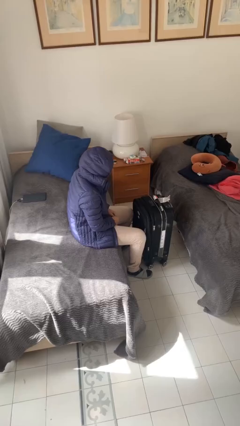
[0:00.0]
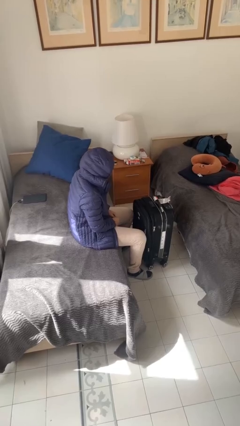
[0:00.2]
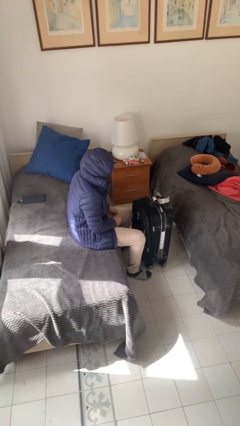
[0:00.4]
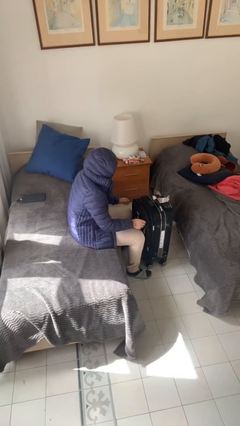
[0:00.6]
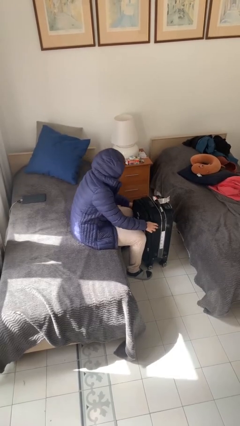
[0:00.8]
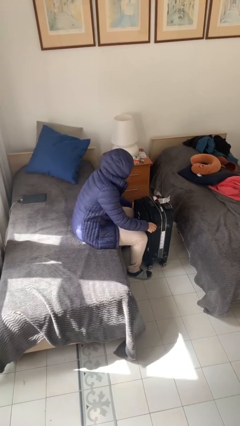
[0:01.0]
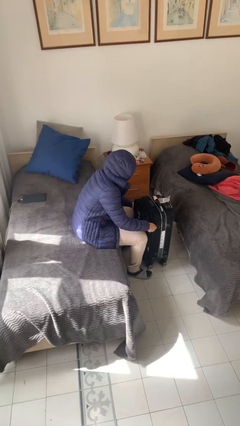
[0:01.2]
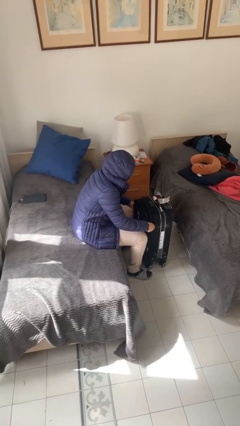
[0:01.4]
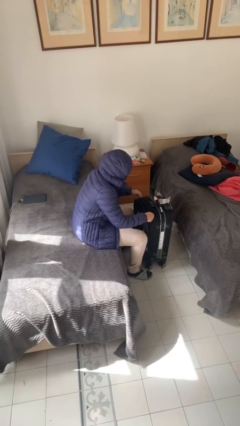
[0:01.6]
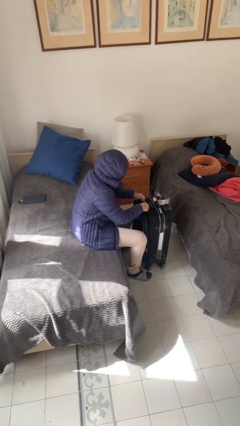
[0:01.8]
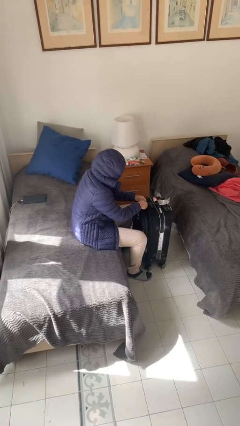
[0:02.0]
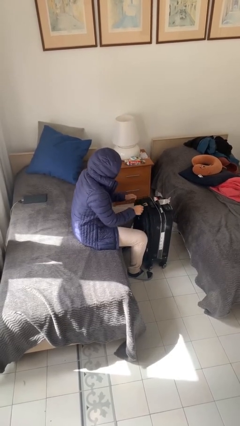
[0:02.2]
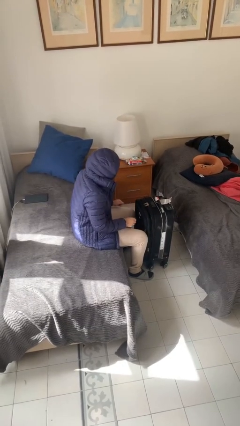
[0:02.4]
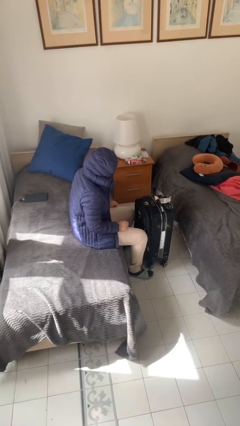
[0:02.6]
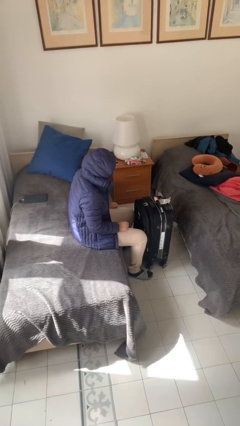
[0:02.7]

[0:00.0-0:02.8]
person closes suitcase

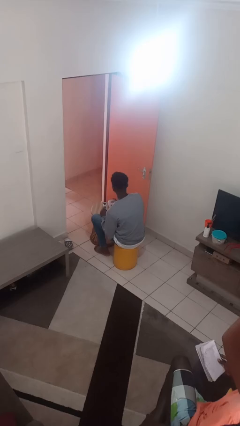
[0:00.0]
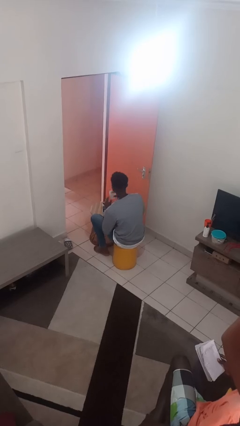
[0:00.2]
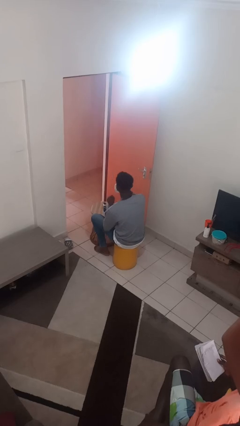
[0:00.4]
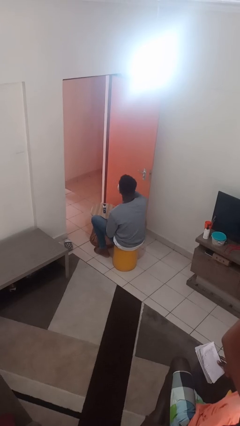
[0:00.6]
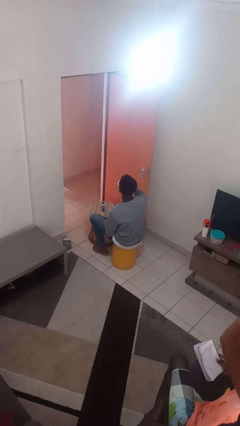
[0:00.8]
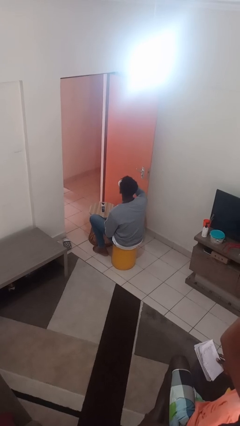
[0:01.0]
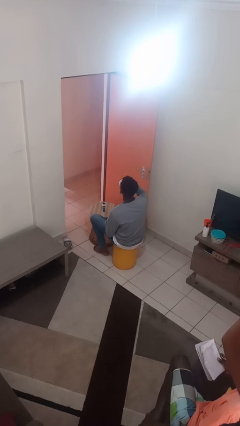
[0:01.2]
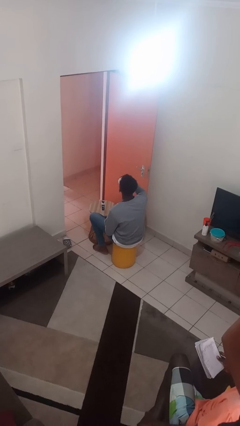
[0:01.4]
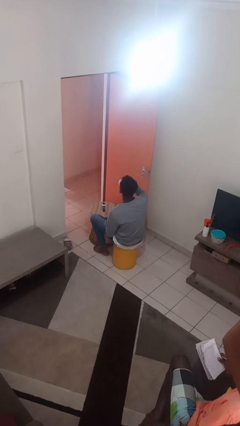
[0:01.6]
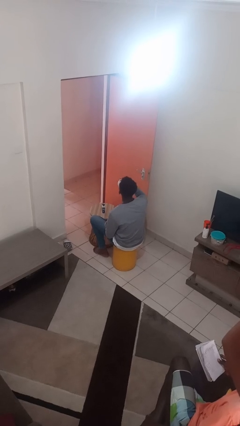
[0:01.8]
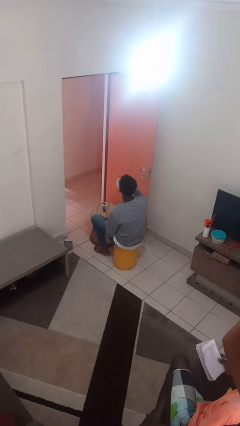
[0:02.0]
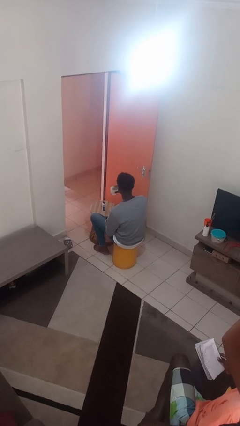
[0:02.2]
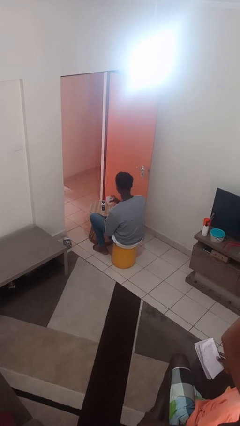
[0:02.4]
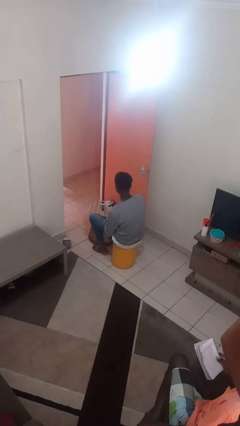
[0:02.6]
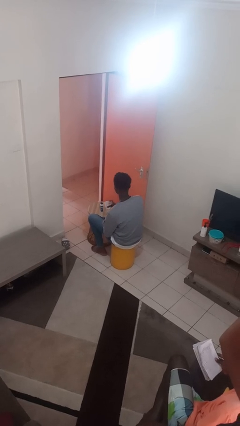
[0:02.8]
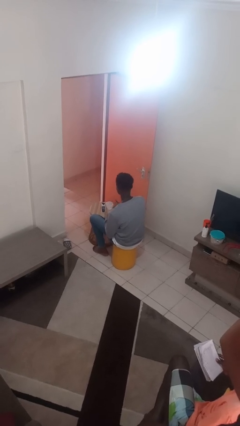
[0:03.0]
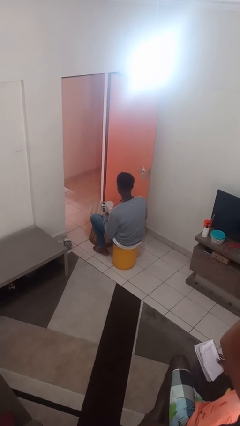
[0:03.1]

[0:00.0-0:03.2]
person drinks from cup

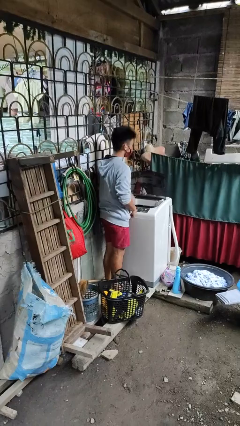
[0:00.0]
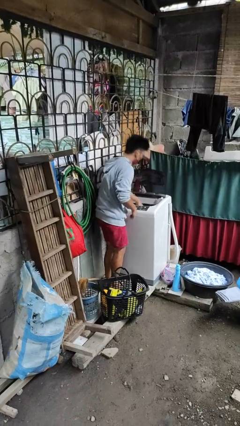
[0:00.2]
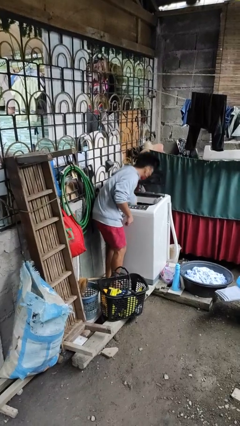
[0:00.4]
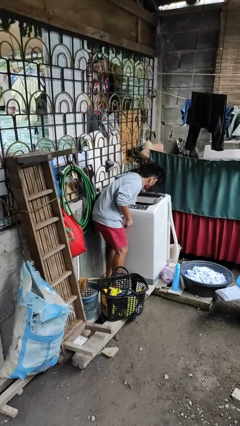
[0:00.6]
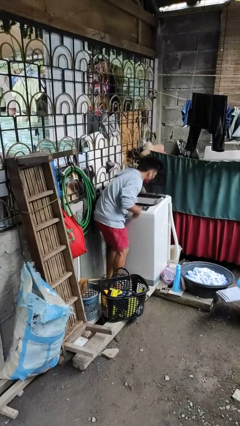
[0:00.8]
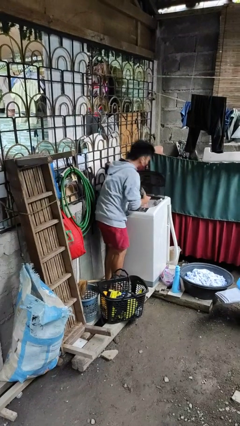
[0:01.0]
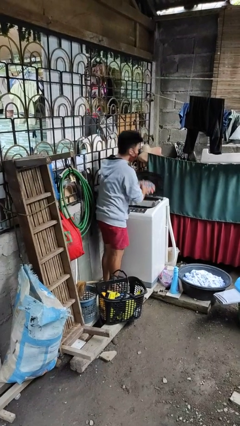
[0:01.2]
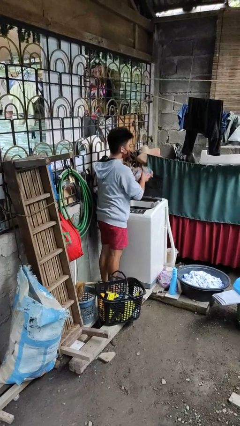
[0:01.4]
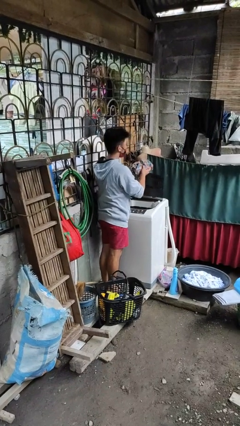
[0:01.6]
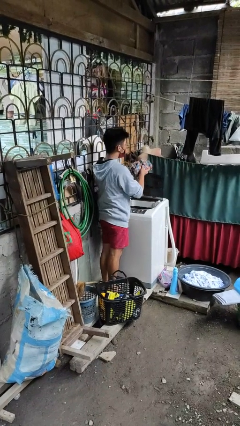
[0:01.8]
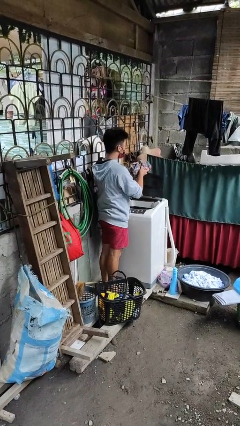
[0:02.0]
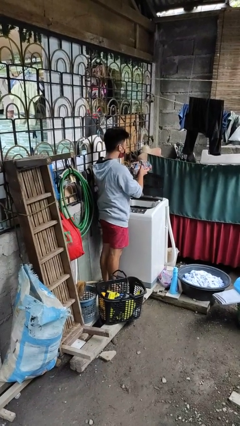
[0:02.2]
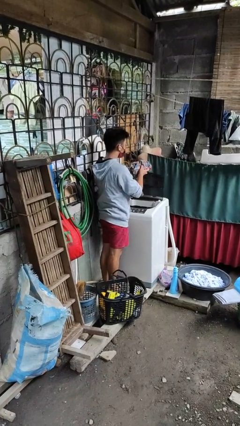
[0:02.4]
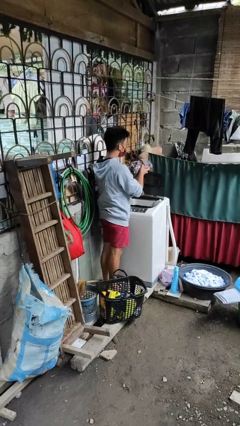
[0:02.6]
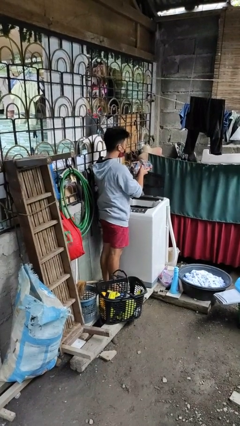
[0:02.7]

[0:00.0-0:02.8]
person unloads clotheswasher

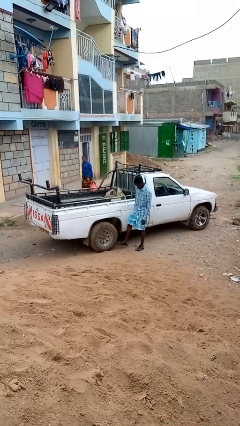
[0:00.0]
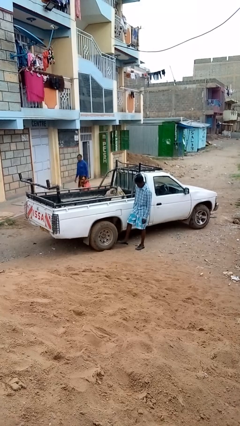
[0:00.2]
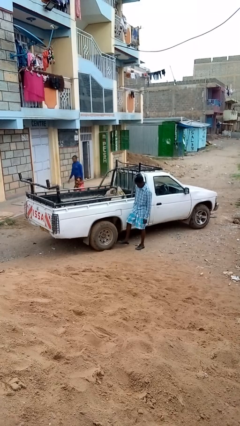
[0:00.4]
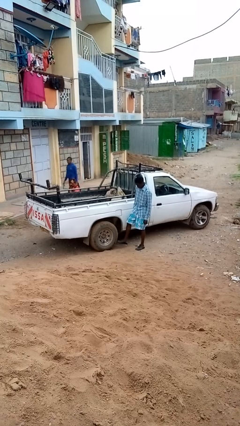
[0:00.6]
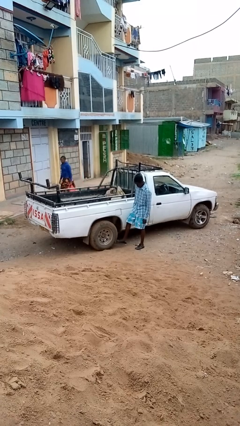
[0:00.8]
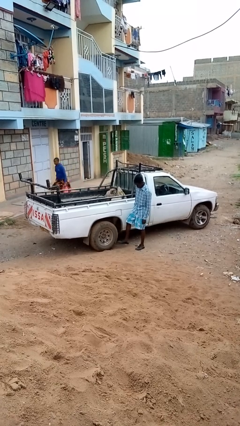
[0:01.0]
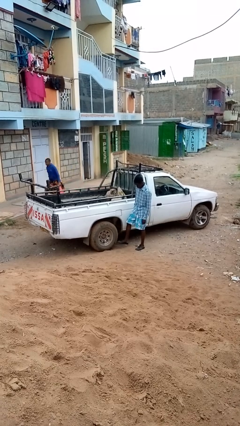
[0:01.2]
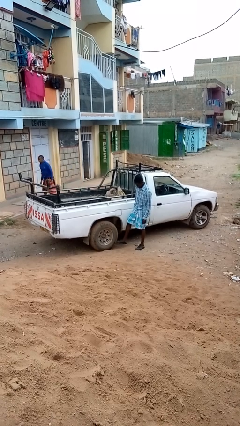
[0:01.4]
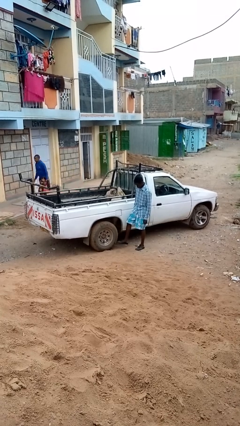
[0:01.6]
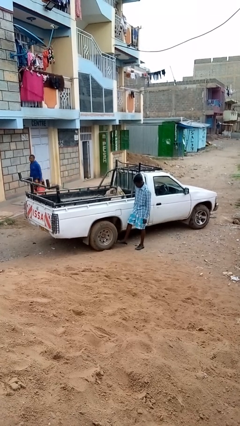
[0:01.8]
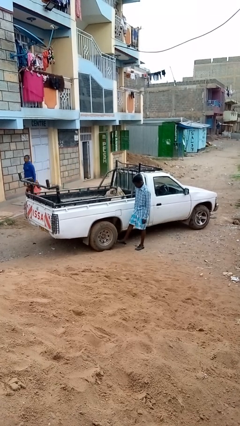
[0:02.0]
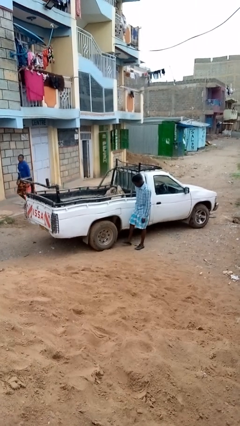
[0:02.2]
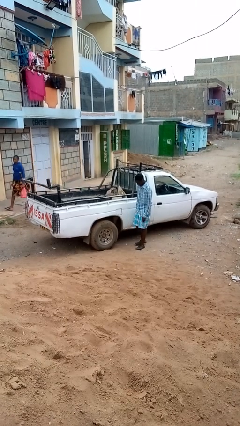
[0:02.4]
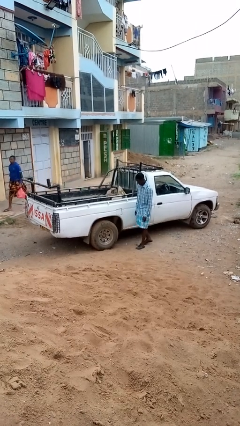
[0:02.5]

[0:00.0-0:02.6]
person kicks car tires

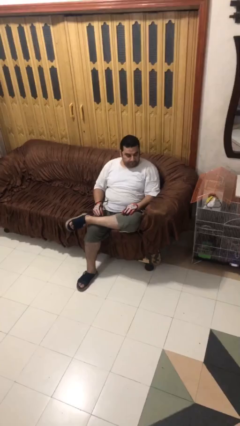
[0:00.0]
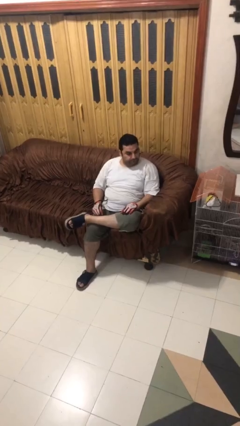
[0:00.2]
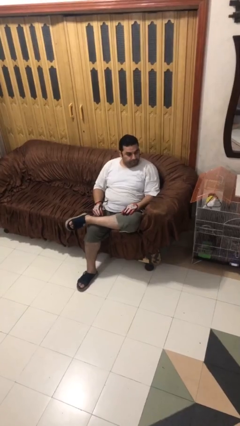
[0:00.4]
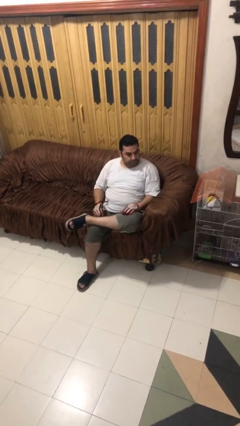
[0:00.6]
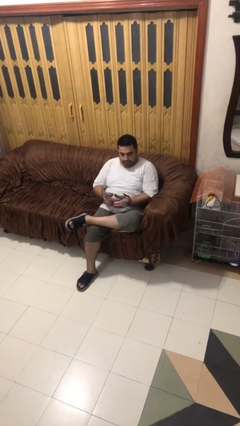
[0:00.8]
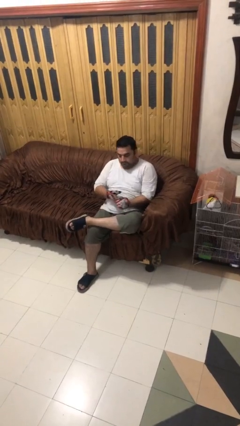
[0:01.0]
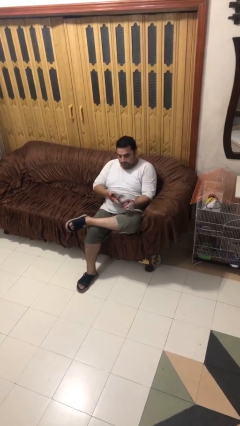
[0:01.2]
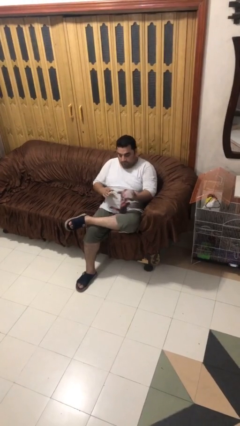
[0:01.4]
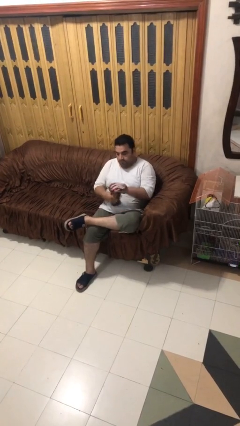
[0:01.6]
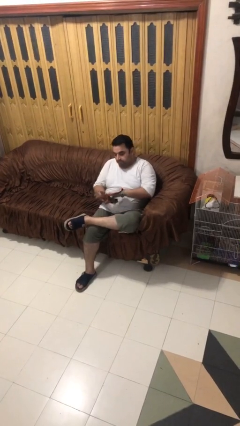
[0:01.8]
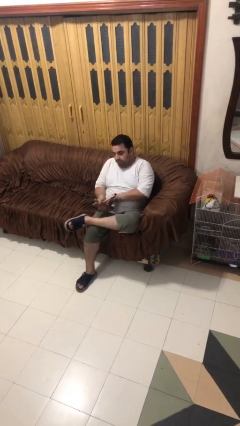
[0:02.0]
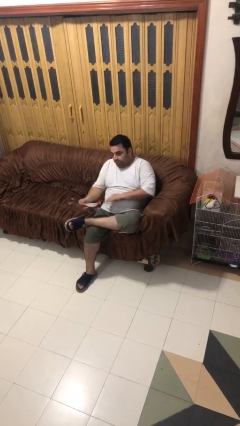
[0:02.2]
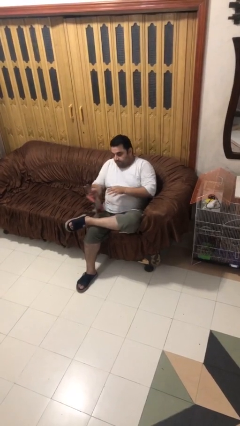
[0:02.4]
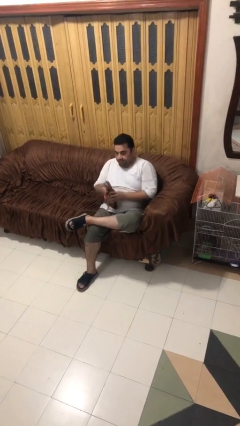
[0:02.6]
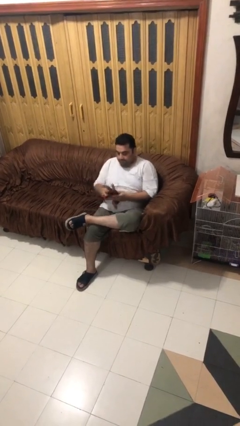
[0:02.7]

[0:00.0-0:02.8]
person takes off gloves

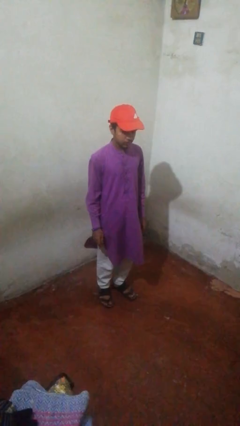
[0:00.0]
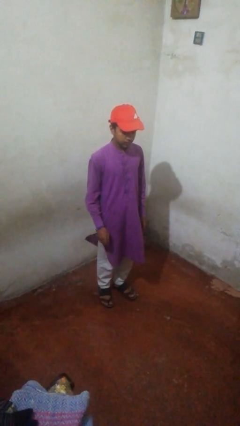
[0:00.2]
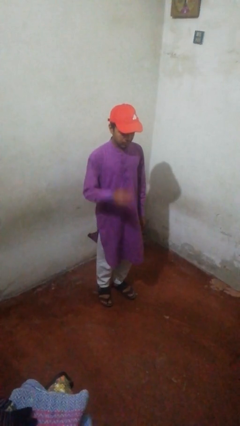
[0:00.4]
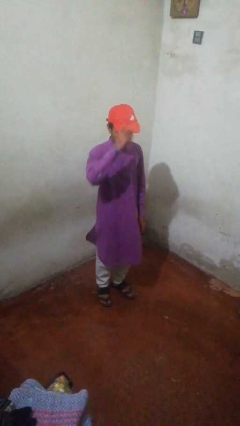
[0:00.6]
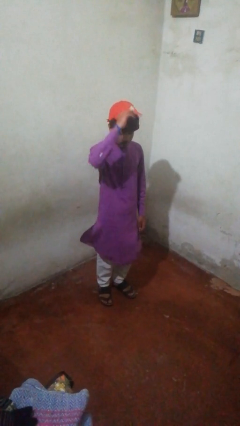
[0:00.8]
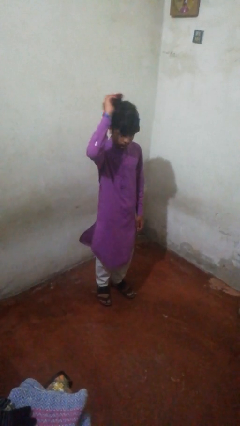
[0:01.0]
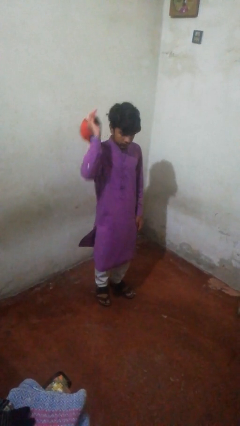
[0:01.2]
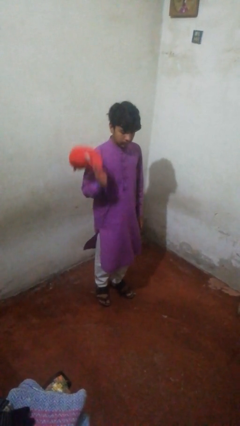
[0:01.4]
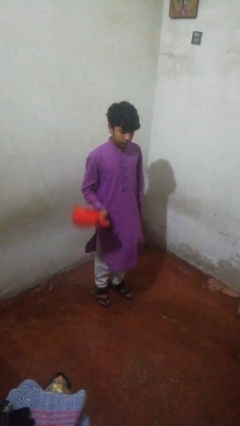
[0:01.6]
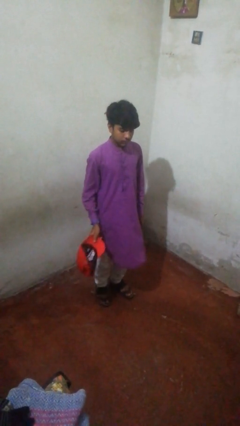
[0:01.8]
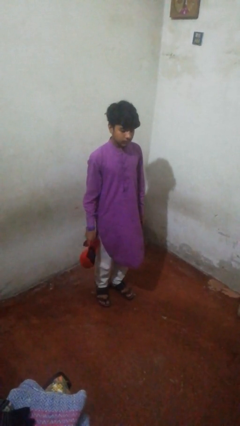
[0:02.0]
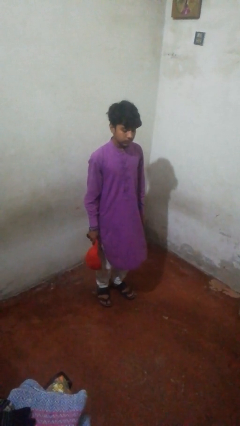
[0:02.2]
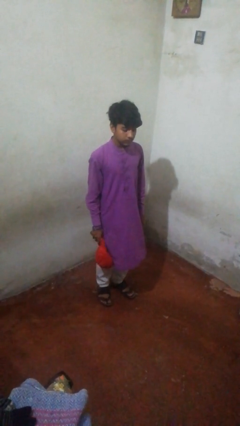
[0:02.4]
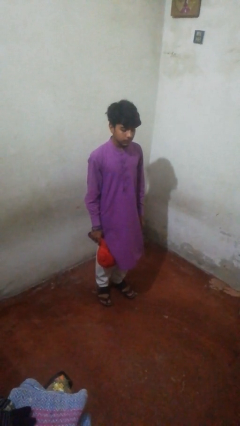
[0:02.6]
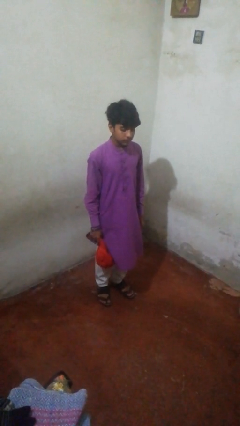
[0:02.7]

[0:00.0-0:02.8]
person closes sliding door

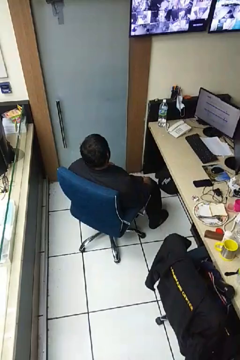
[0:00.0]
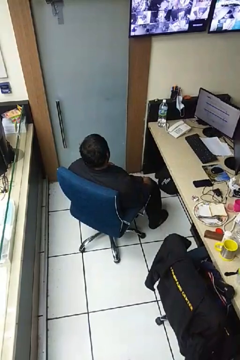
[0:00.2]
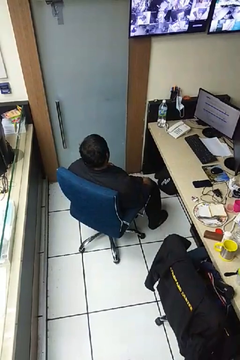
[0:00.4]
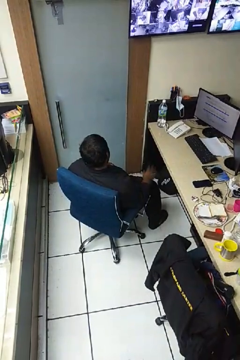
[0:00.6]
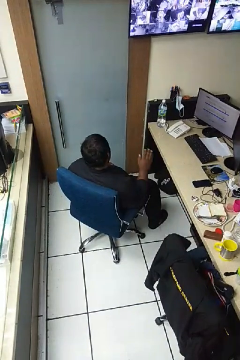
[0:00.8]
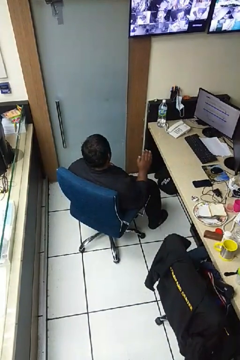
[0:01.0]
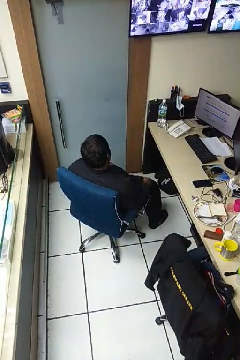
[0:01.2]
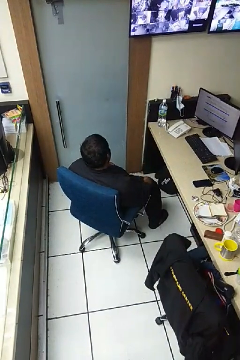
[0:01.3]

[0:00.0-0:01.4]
person slaps hands on thighs
